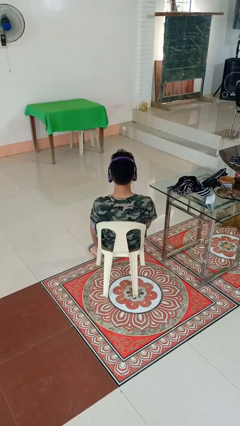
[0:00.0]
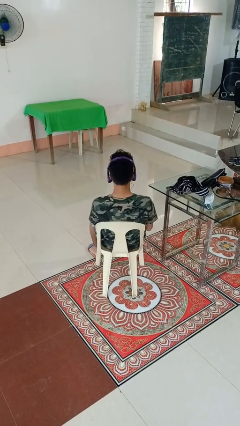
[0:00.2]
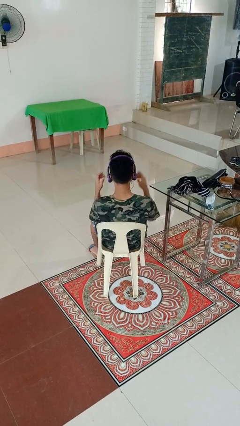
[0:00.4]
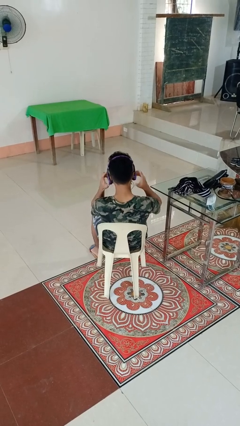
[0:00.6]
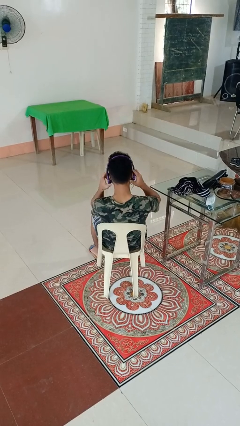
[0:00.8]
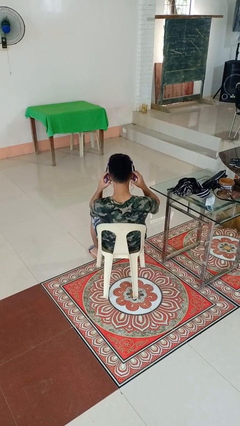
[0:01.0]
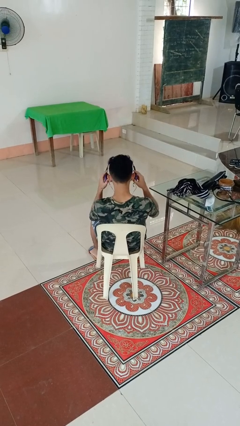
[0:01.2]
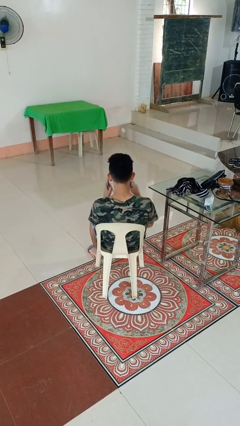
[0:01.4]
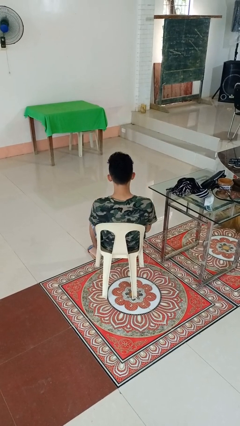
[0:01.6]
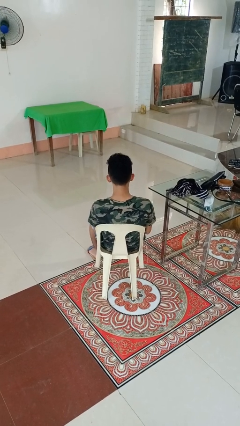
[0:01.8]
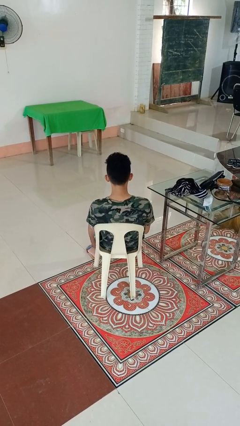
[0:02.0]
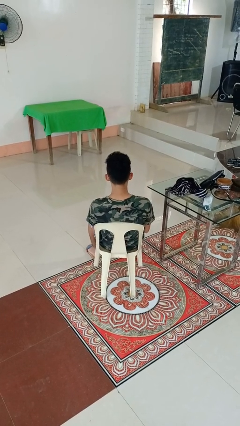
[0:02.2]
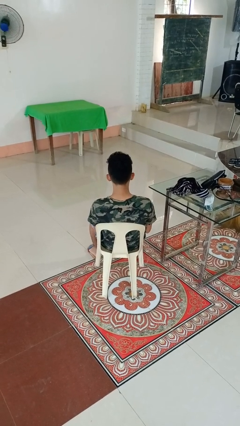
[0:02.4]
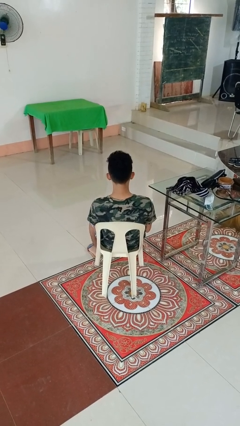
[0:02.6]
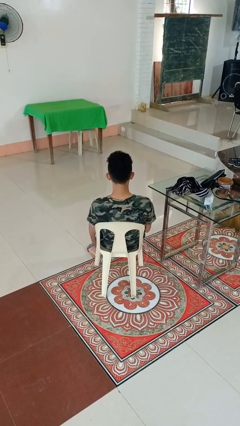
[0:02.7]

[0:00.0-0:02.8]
person takes off headphones

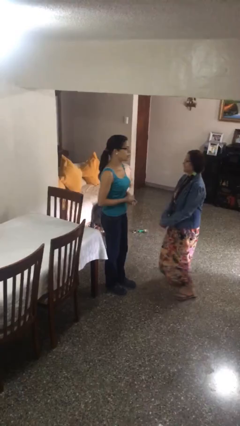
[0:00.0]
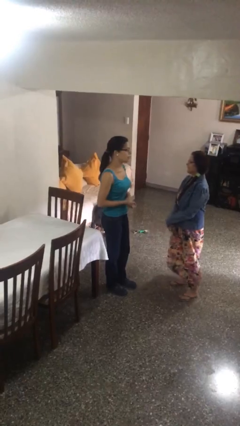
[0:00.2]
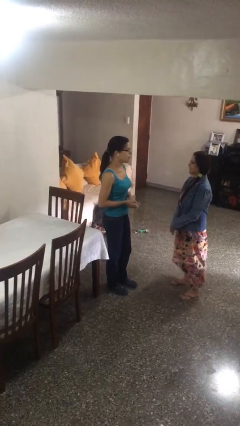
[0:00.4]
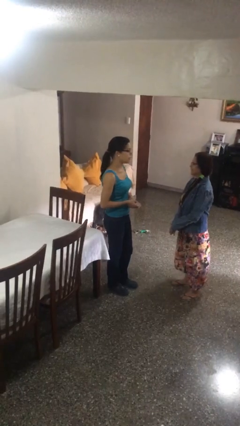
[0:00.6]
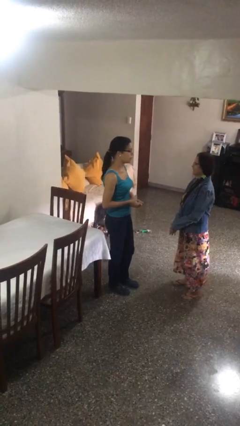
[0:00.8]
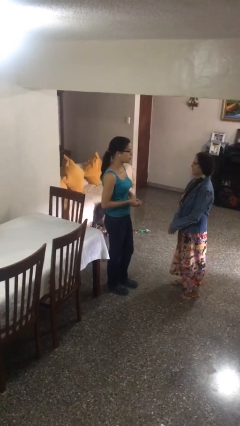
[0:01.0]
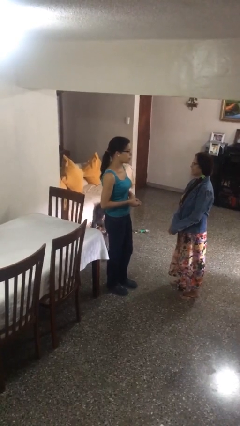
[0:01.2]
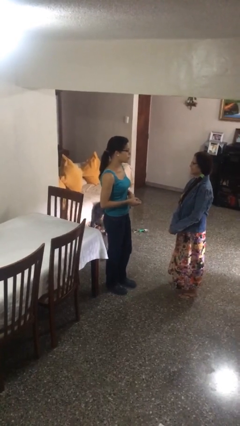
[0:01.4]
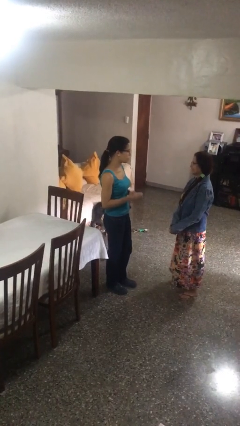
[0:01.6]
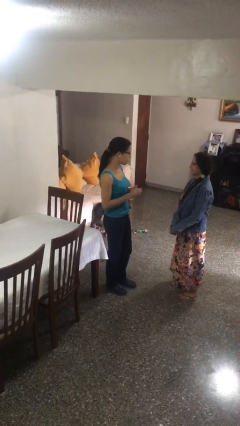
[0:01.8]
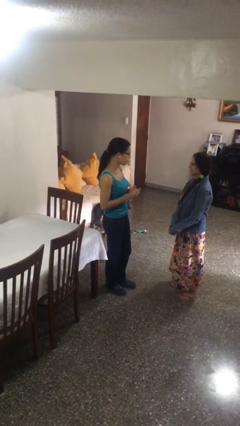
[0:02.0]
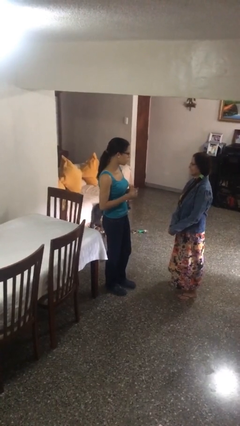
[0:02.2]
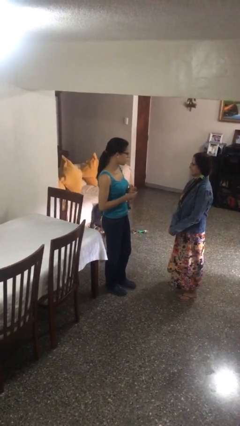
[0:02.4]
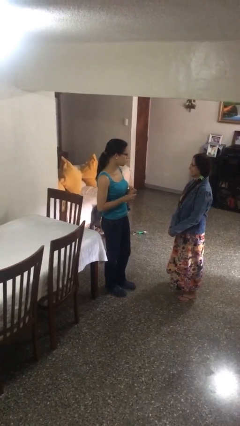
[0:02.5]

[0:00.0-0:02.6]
person talks to person

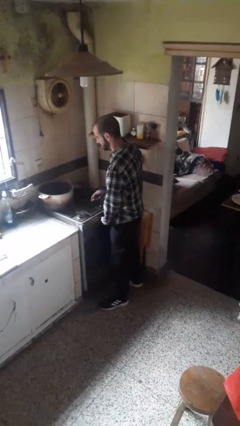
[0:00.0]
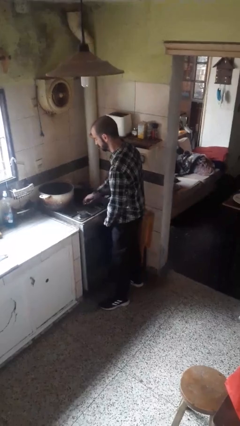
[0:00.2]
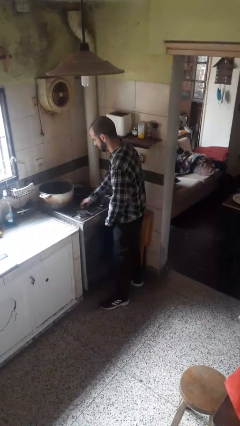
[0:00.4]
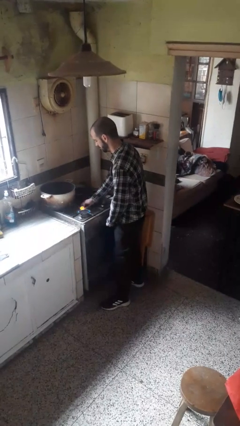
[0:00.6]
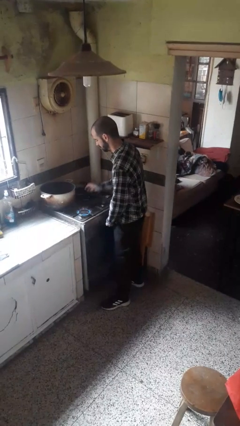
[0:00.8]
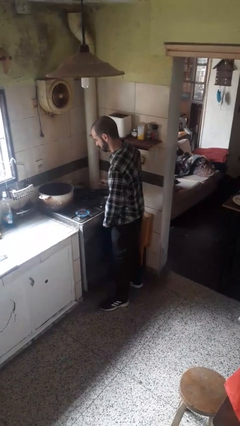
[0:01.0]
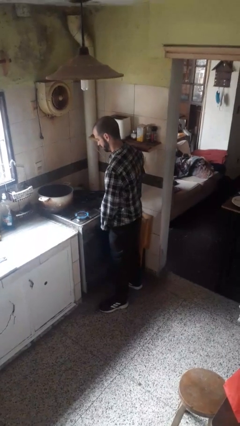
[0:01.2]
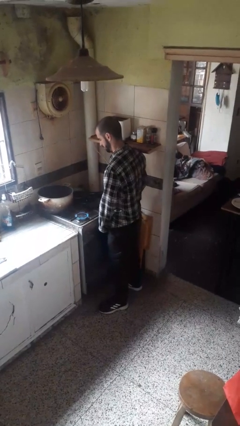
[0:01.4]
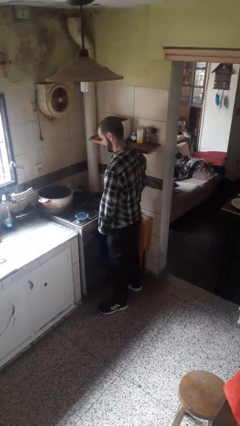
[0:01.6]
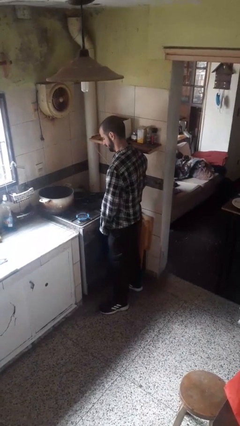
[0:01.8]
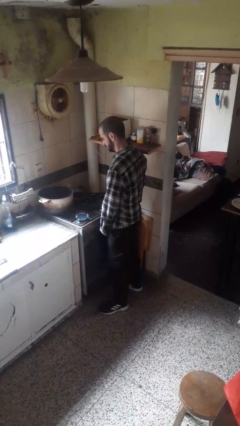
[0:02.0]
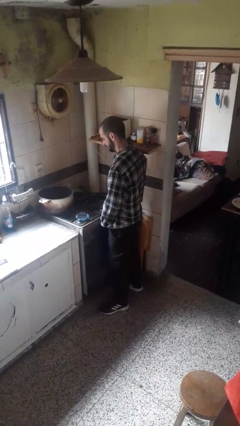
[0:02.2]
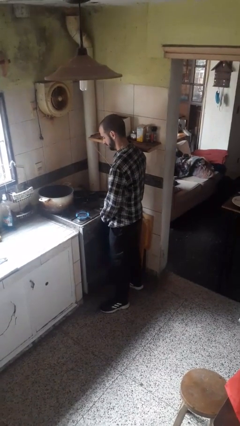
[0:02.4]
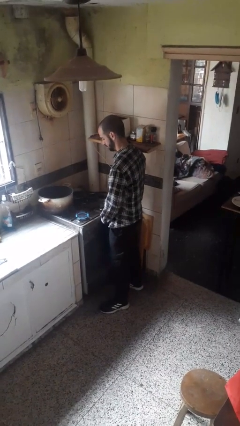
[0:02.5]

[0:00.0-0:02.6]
person turns on stovetop

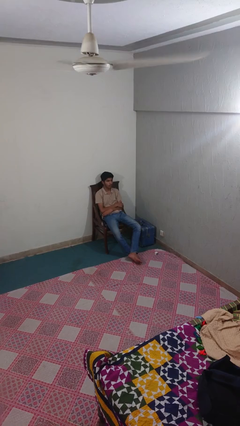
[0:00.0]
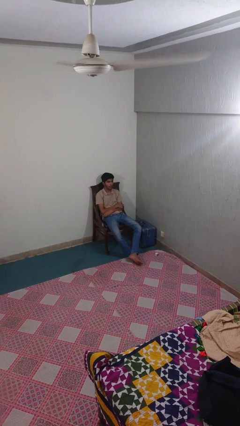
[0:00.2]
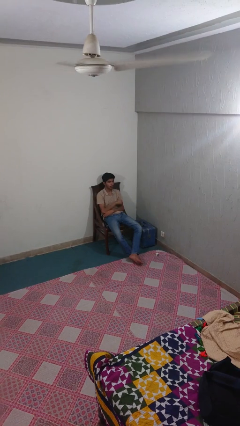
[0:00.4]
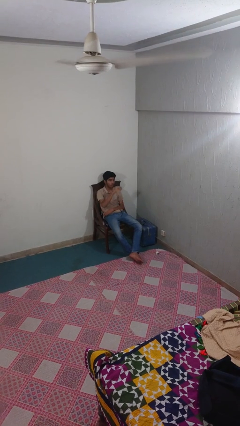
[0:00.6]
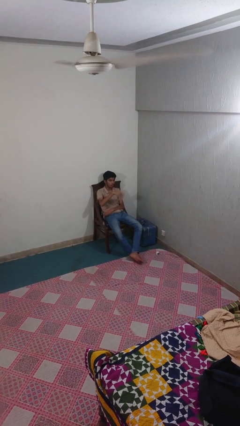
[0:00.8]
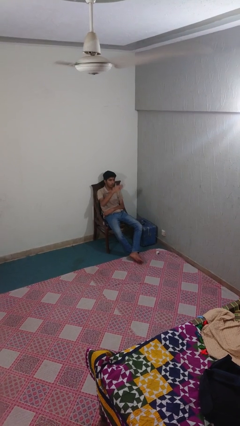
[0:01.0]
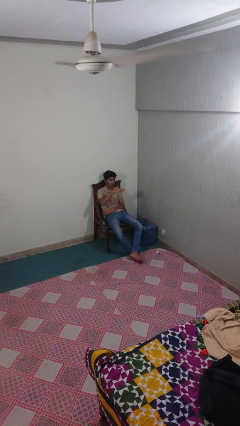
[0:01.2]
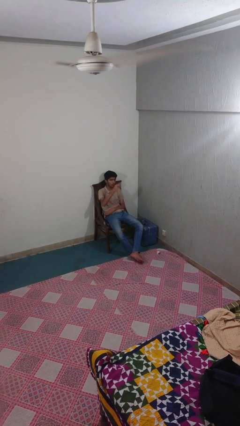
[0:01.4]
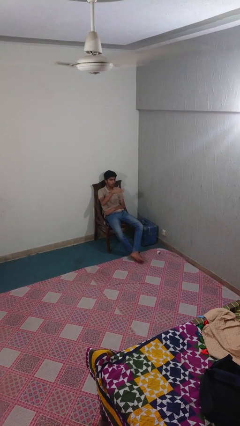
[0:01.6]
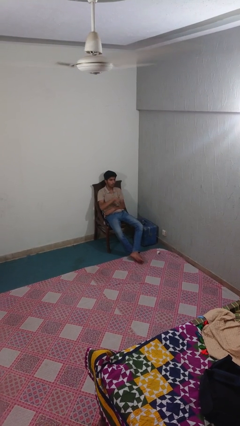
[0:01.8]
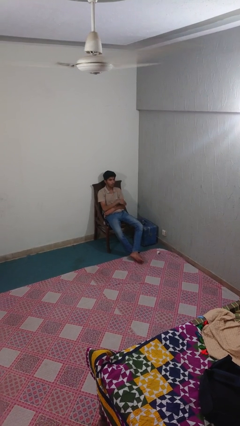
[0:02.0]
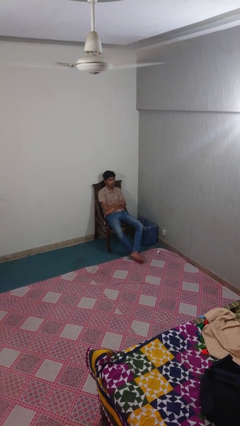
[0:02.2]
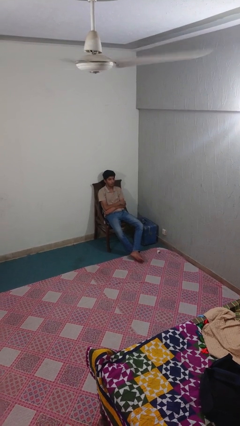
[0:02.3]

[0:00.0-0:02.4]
person gestures come here

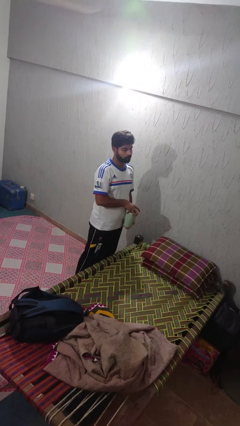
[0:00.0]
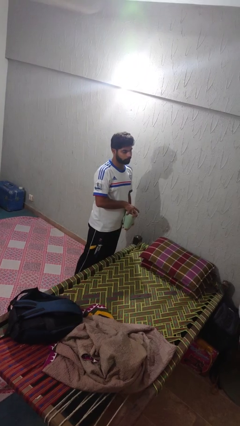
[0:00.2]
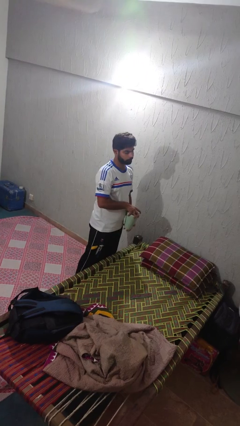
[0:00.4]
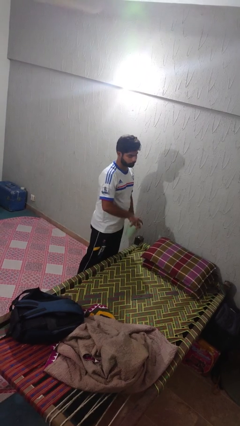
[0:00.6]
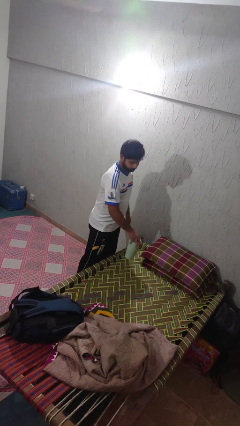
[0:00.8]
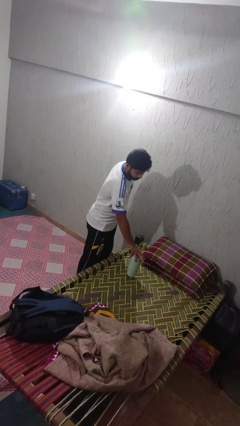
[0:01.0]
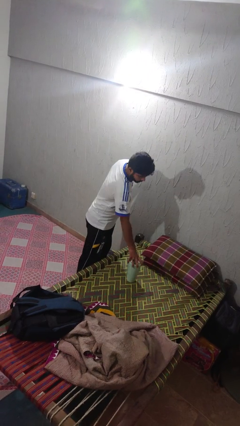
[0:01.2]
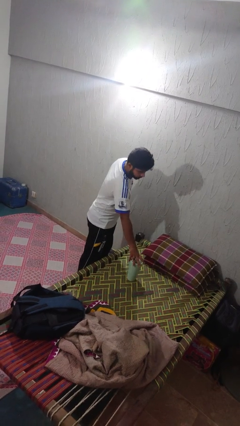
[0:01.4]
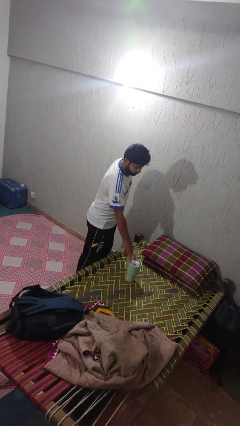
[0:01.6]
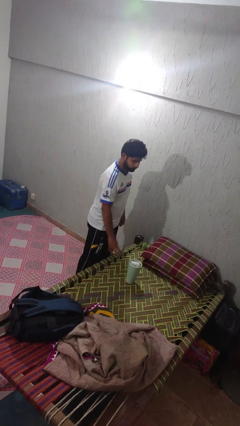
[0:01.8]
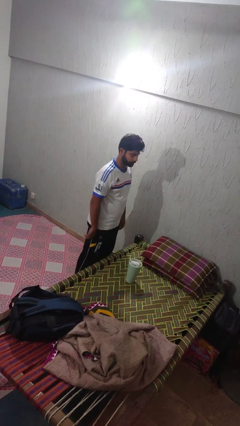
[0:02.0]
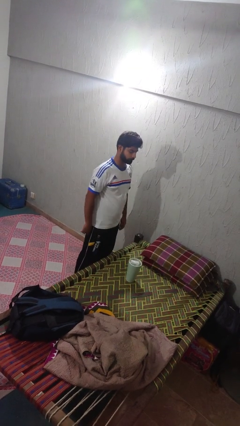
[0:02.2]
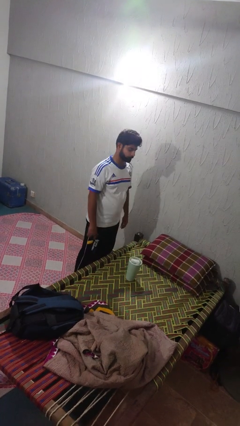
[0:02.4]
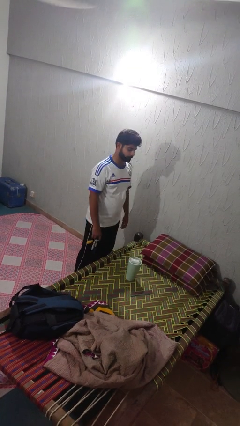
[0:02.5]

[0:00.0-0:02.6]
person puts down object on bed

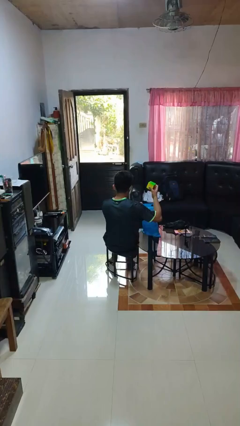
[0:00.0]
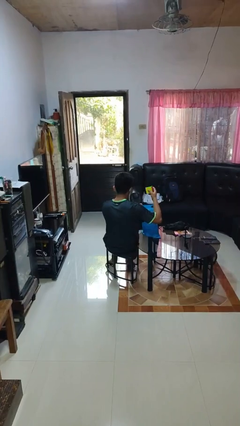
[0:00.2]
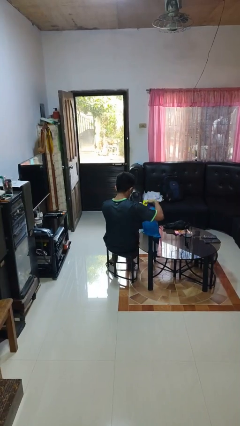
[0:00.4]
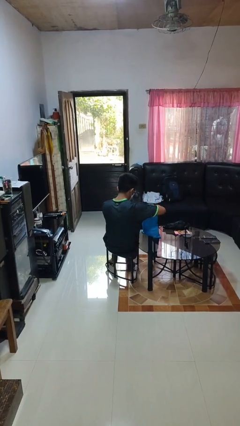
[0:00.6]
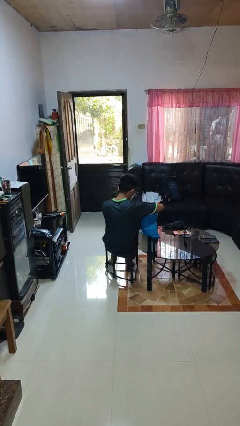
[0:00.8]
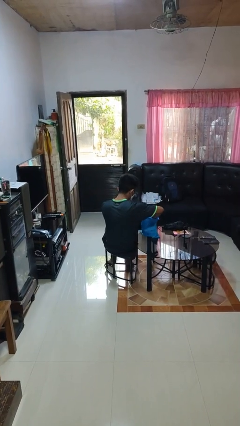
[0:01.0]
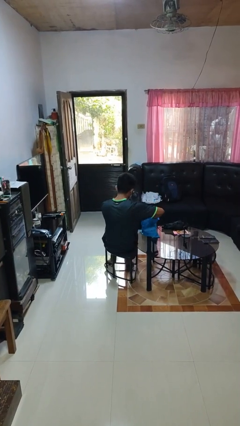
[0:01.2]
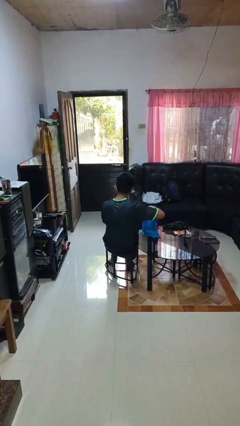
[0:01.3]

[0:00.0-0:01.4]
person puts object into bag

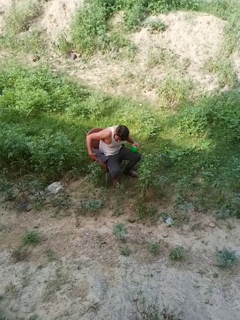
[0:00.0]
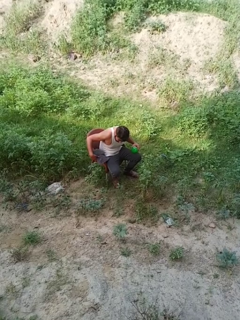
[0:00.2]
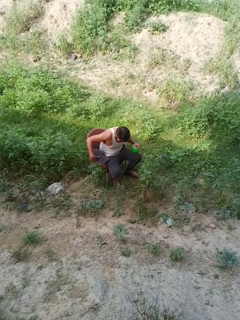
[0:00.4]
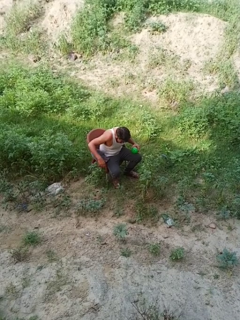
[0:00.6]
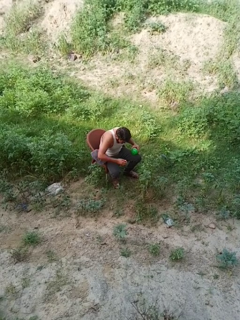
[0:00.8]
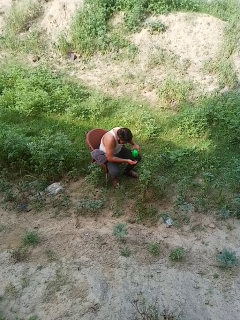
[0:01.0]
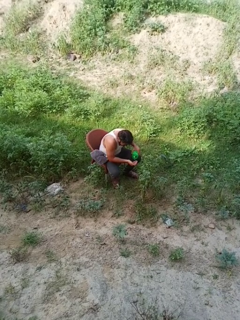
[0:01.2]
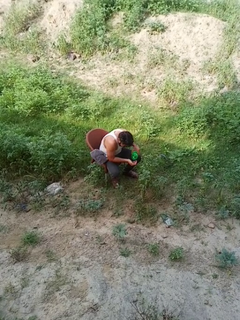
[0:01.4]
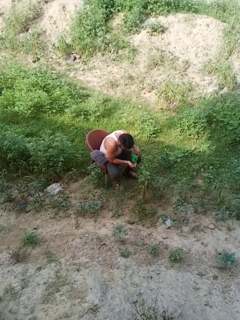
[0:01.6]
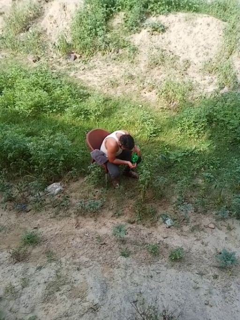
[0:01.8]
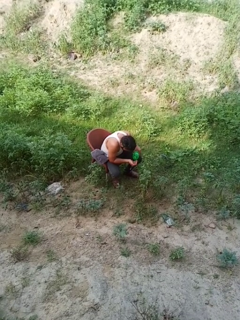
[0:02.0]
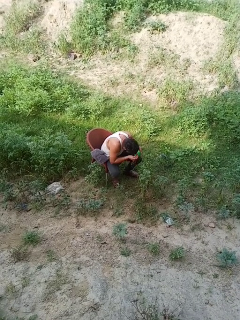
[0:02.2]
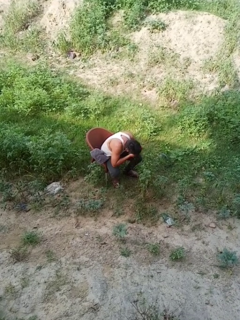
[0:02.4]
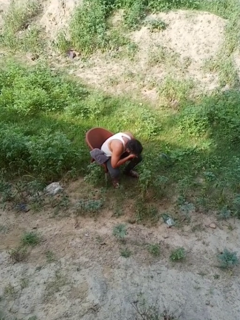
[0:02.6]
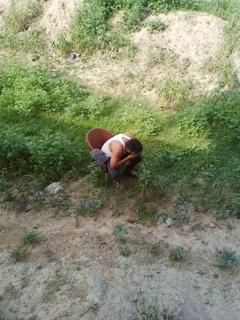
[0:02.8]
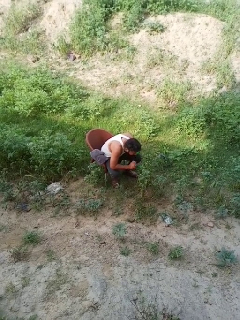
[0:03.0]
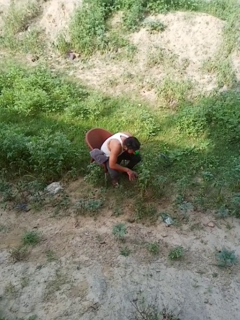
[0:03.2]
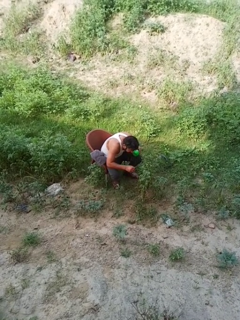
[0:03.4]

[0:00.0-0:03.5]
person washes face
